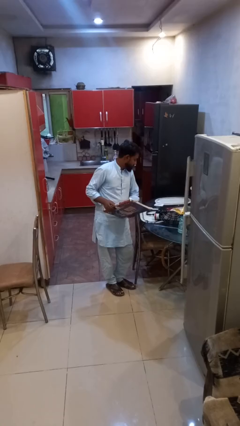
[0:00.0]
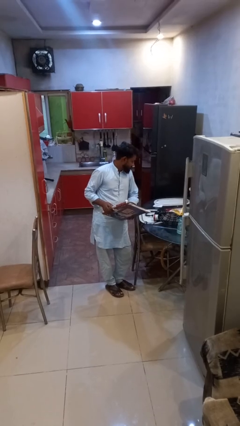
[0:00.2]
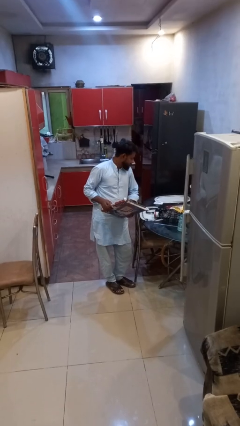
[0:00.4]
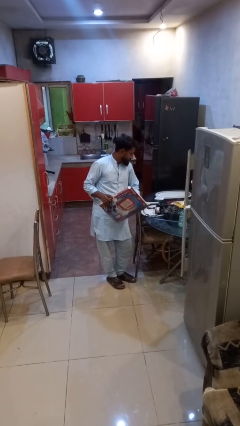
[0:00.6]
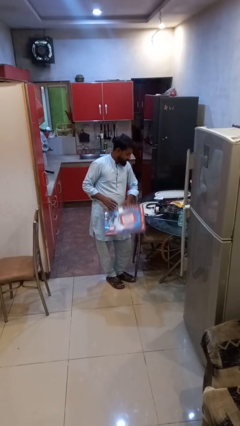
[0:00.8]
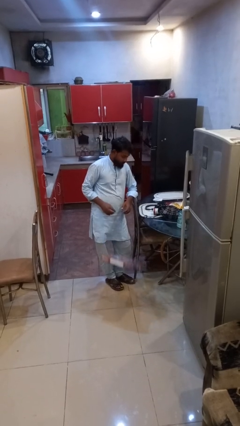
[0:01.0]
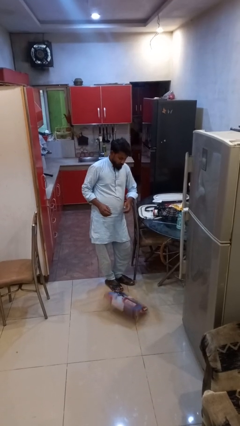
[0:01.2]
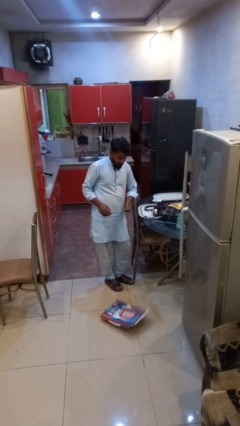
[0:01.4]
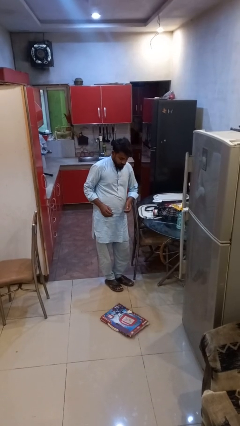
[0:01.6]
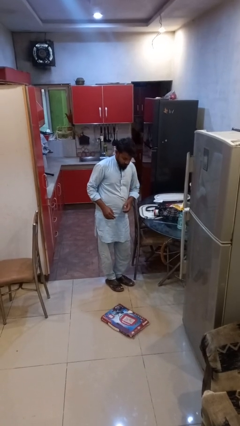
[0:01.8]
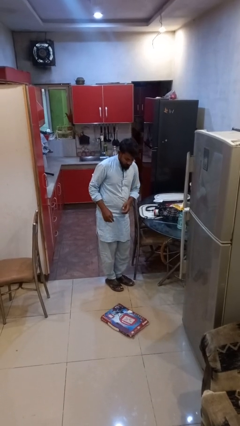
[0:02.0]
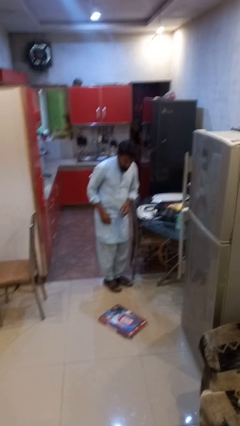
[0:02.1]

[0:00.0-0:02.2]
person drops object

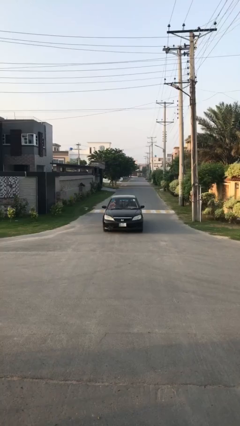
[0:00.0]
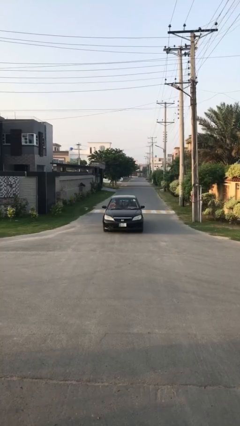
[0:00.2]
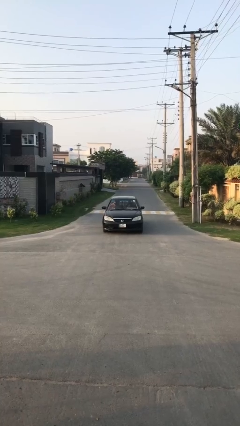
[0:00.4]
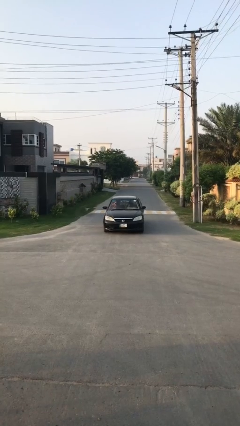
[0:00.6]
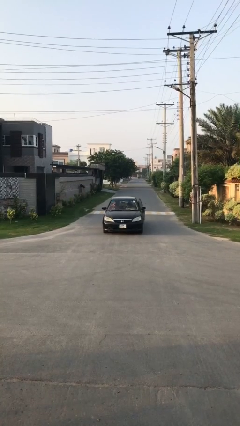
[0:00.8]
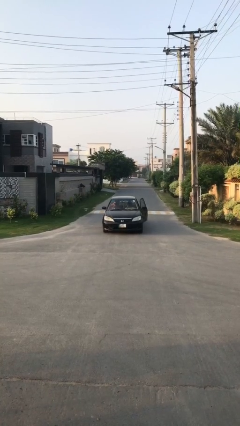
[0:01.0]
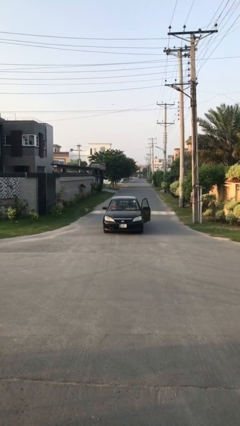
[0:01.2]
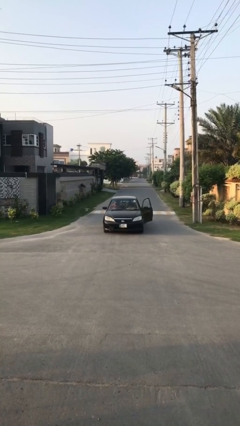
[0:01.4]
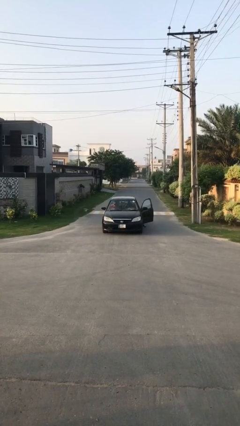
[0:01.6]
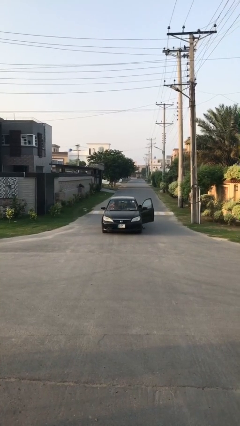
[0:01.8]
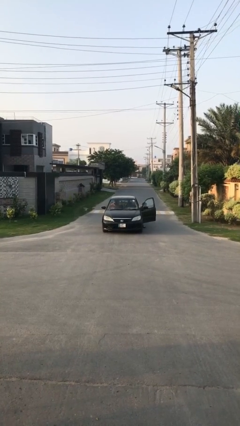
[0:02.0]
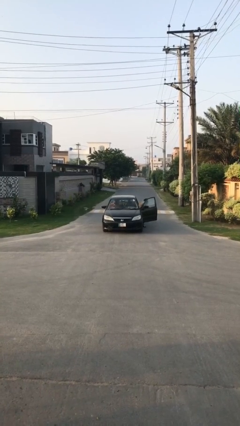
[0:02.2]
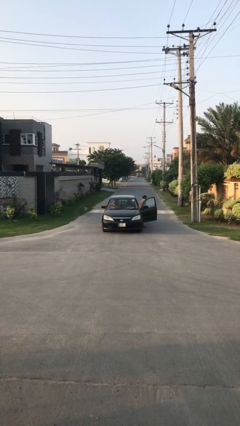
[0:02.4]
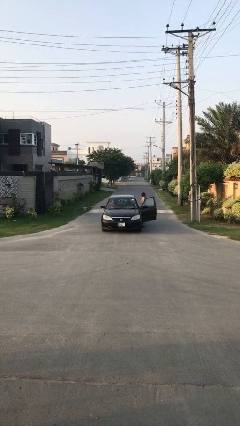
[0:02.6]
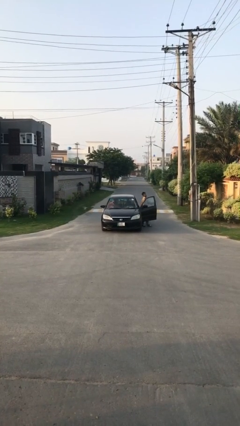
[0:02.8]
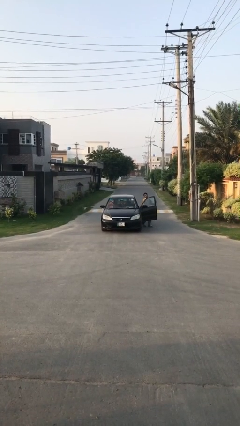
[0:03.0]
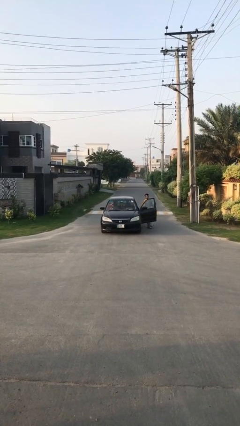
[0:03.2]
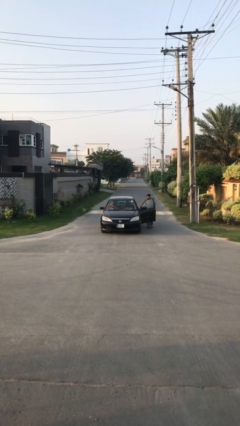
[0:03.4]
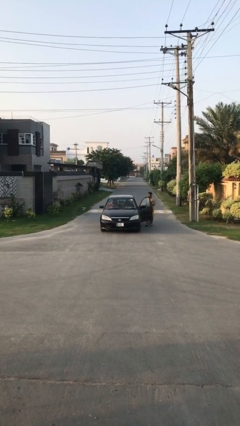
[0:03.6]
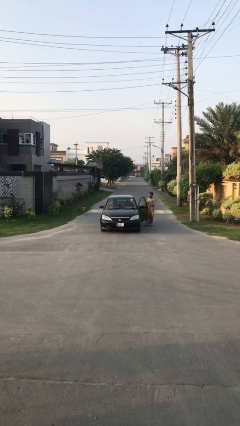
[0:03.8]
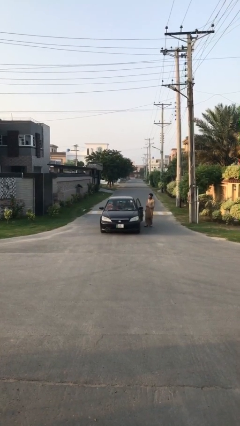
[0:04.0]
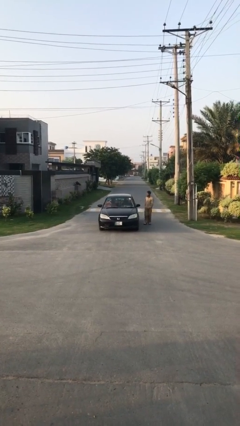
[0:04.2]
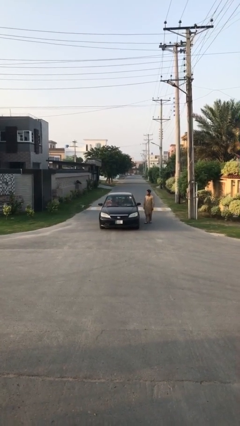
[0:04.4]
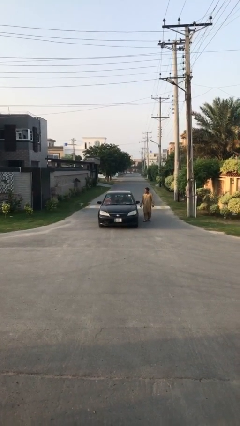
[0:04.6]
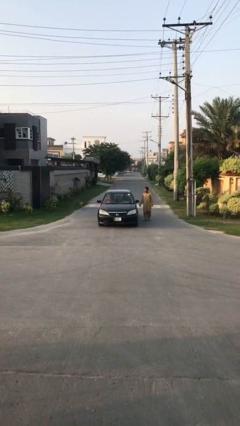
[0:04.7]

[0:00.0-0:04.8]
car drops off person

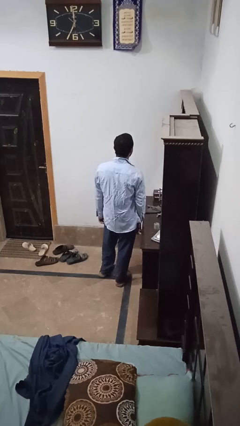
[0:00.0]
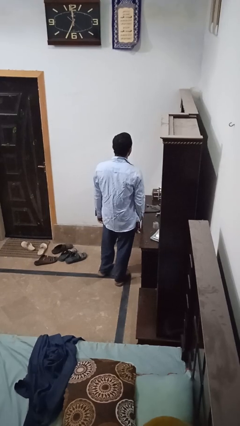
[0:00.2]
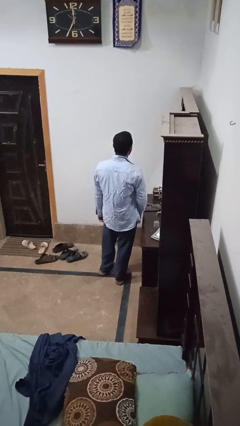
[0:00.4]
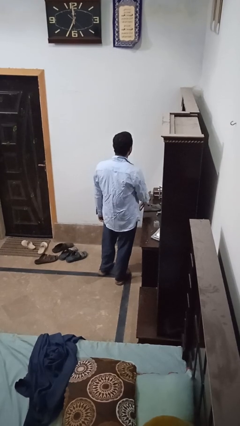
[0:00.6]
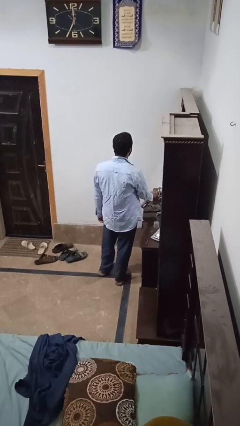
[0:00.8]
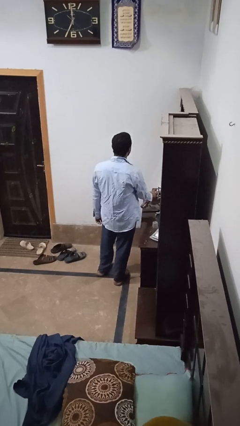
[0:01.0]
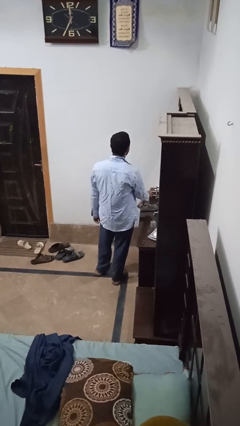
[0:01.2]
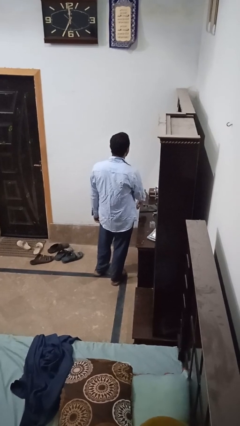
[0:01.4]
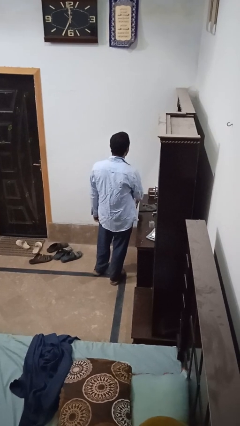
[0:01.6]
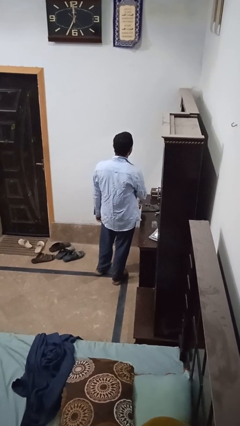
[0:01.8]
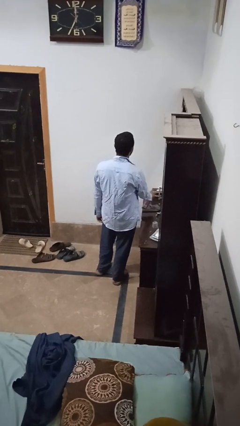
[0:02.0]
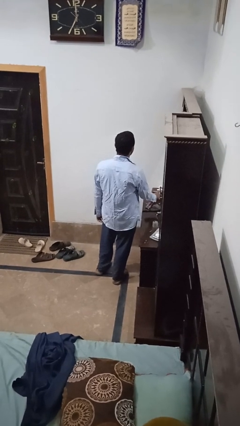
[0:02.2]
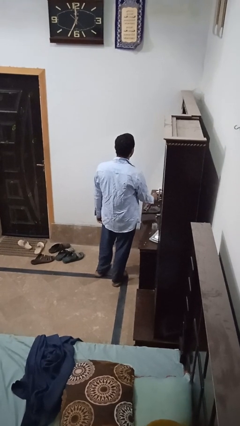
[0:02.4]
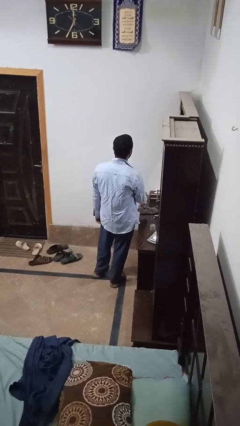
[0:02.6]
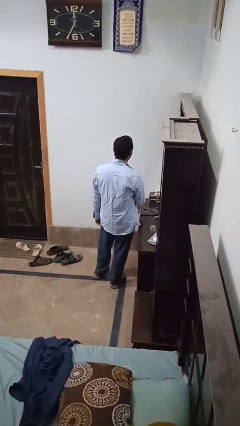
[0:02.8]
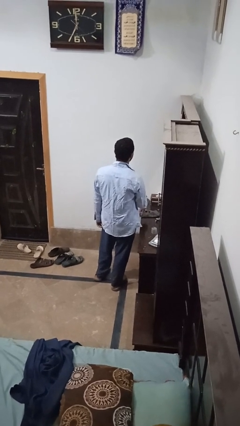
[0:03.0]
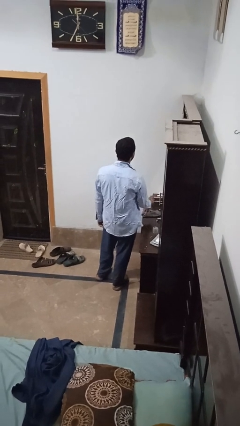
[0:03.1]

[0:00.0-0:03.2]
person sprays from bottle

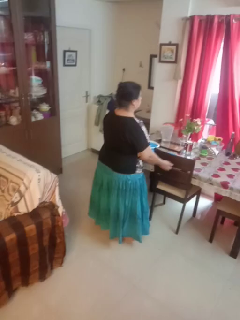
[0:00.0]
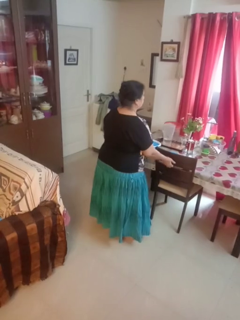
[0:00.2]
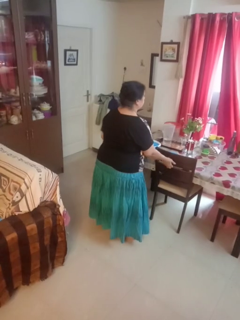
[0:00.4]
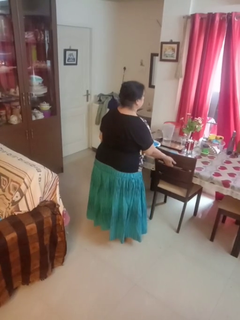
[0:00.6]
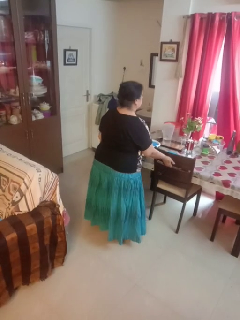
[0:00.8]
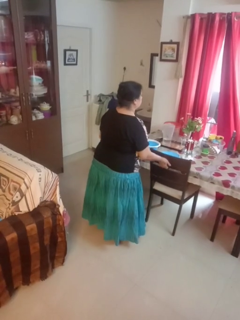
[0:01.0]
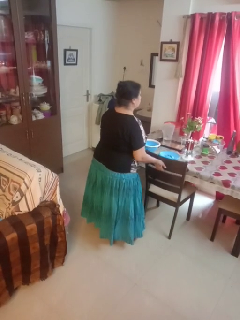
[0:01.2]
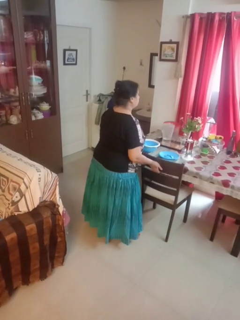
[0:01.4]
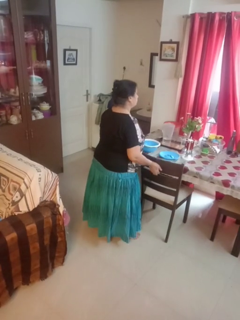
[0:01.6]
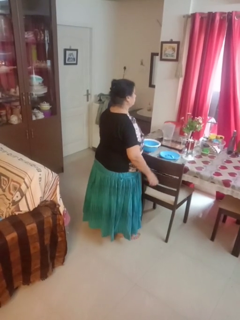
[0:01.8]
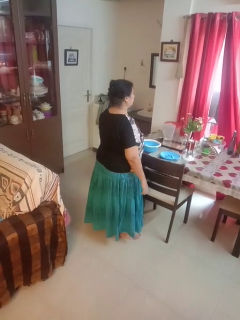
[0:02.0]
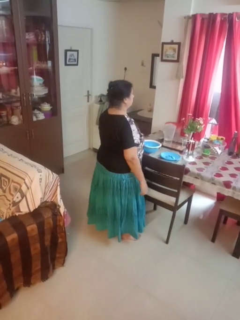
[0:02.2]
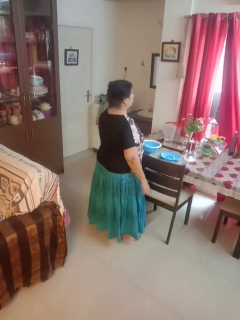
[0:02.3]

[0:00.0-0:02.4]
person pulls out chair

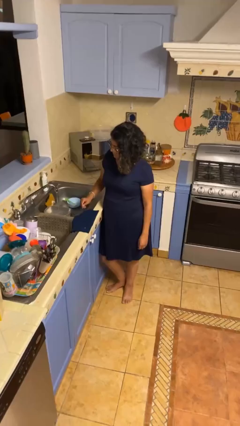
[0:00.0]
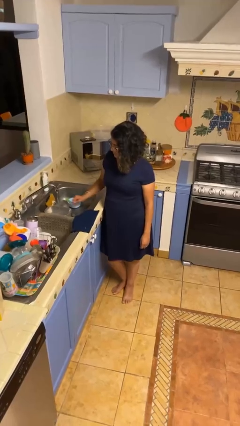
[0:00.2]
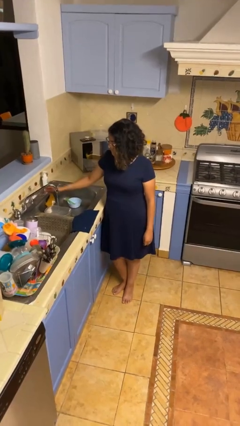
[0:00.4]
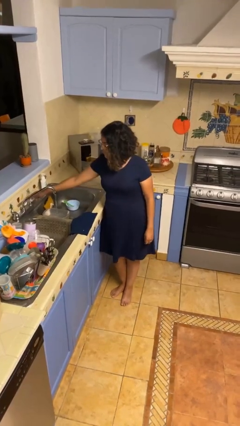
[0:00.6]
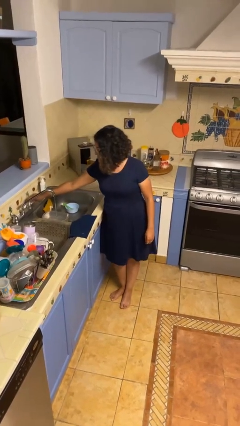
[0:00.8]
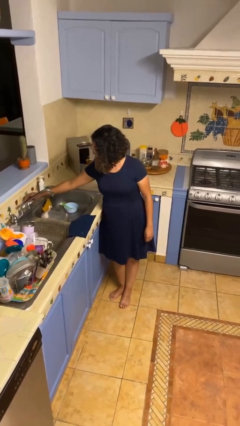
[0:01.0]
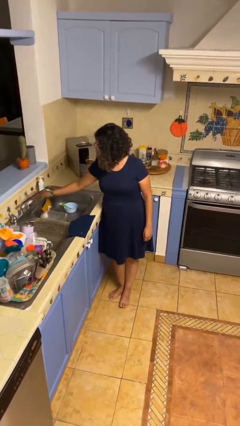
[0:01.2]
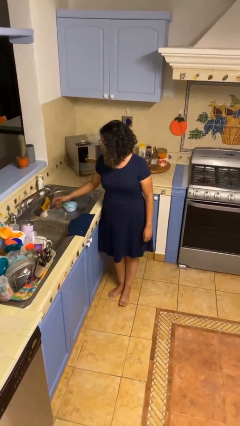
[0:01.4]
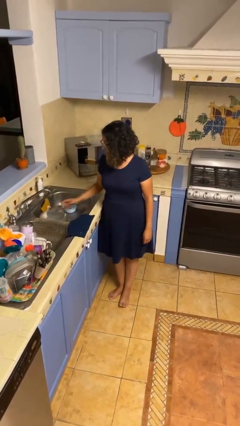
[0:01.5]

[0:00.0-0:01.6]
person turns off faucet

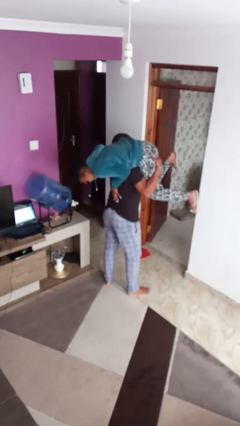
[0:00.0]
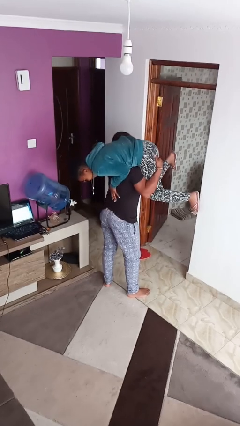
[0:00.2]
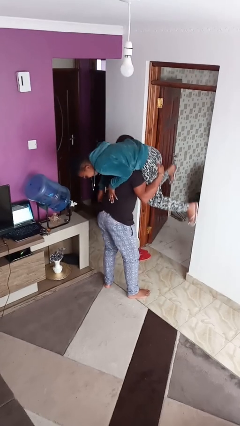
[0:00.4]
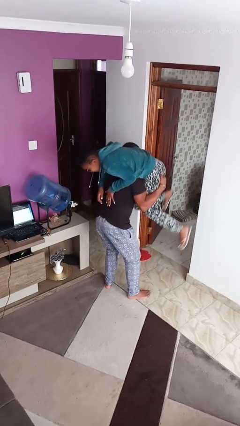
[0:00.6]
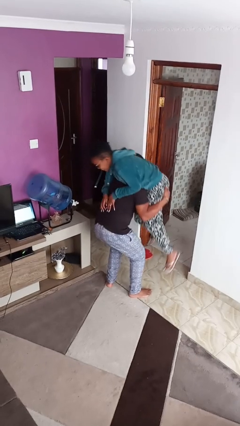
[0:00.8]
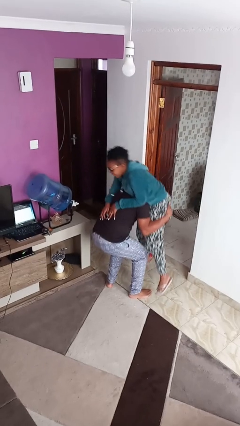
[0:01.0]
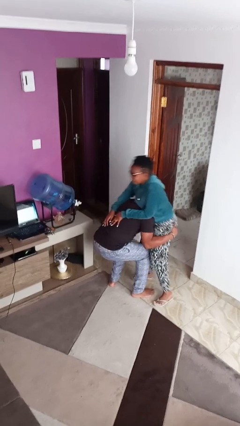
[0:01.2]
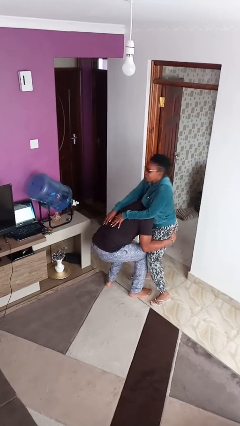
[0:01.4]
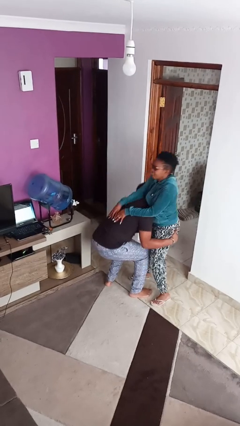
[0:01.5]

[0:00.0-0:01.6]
person puts down person

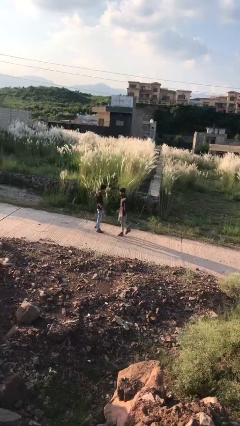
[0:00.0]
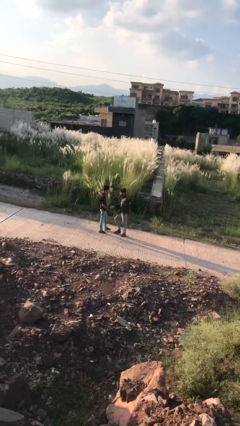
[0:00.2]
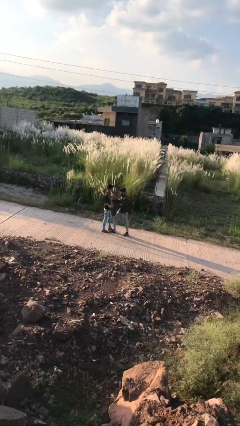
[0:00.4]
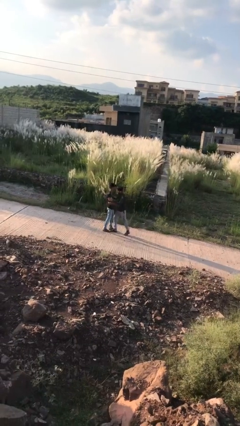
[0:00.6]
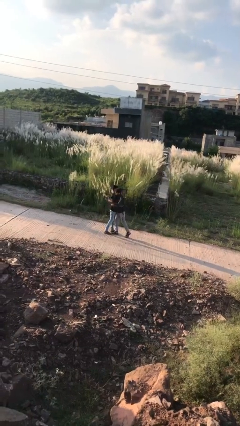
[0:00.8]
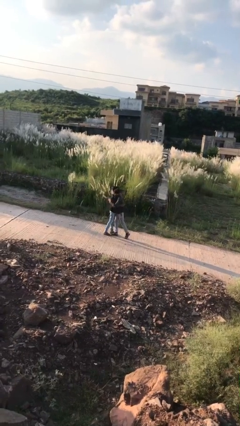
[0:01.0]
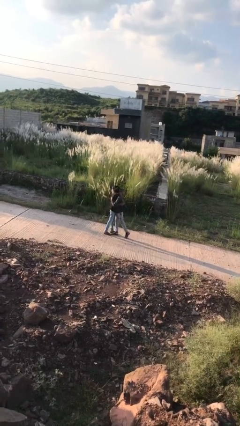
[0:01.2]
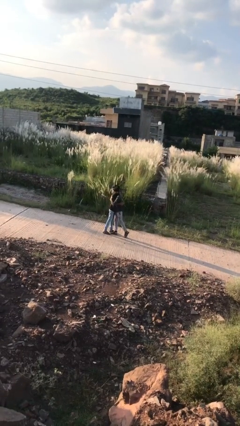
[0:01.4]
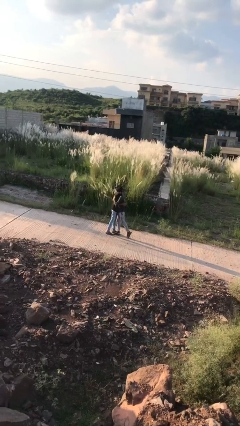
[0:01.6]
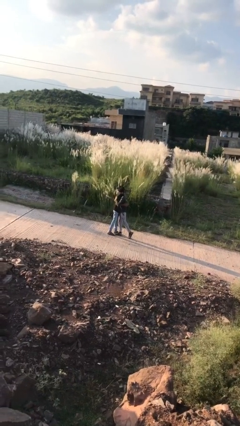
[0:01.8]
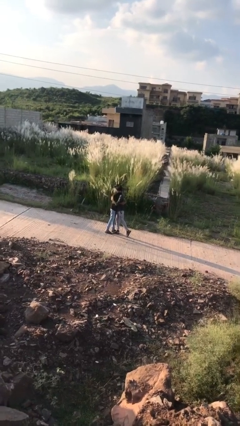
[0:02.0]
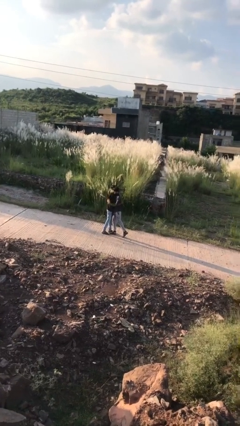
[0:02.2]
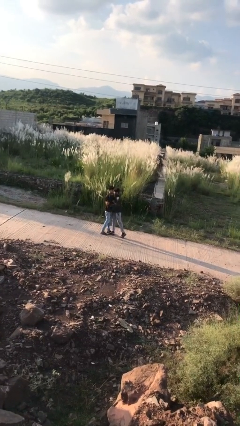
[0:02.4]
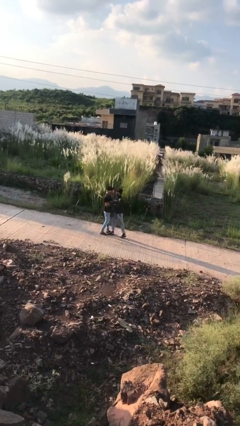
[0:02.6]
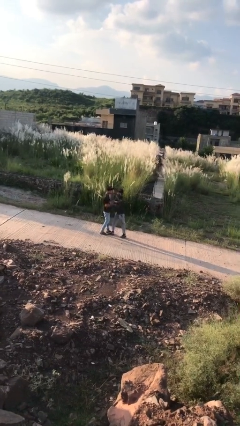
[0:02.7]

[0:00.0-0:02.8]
person embraces person
